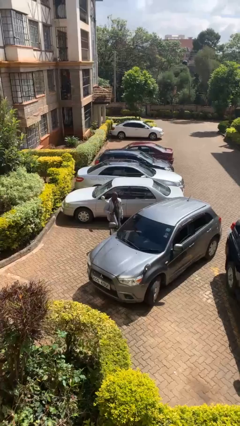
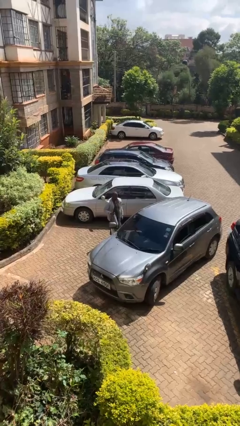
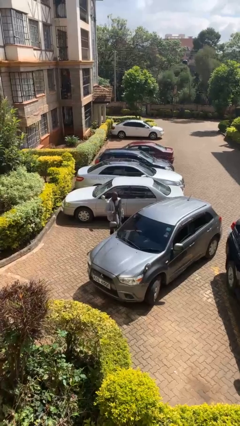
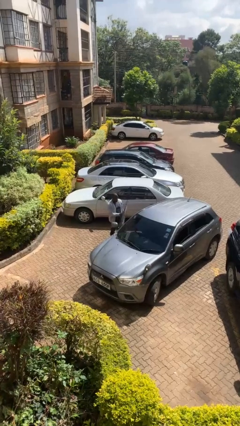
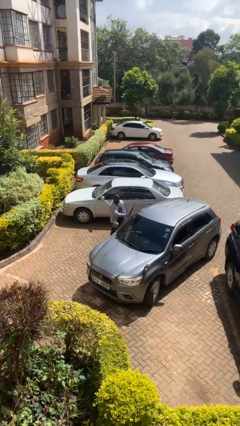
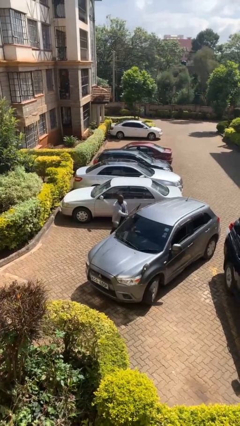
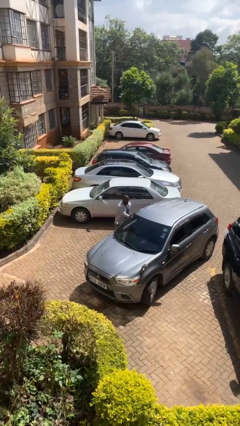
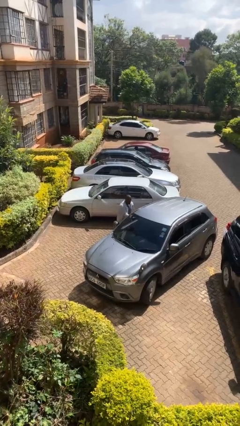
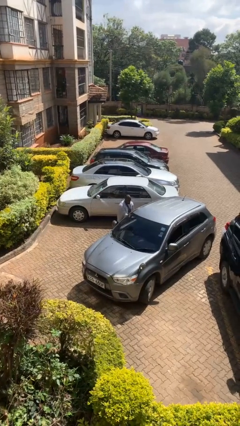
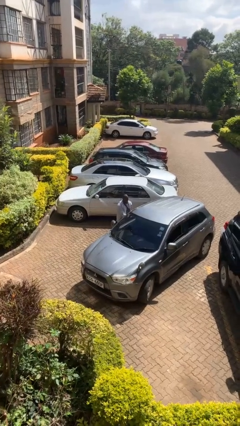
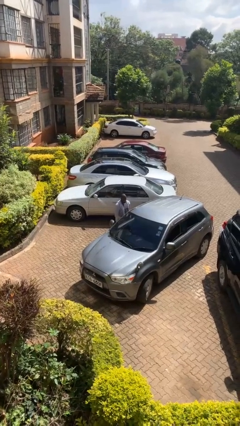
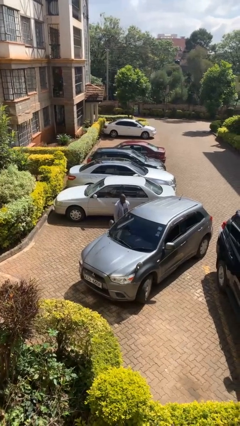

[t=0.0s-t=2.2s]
person closes car door

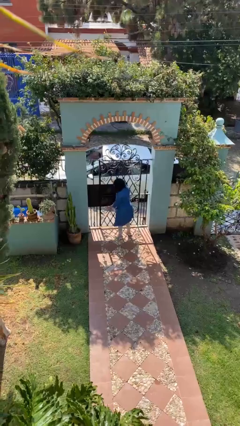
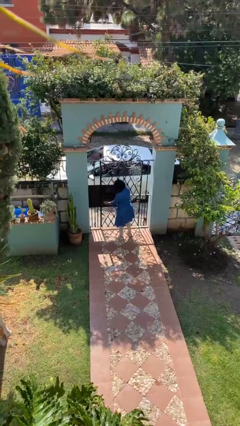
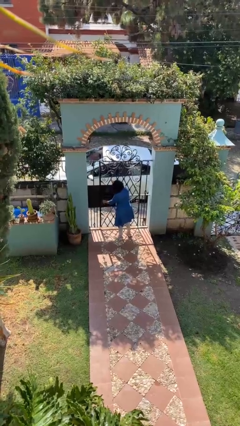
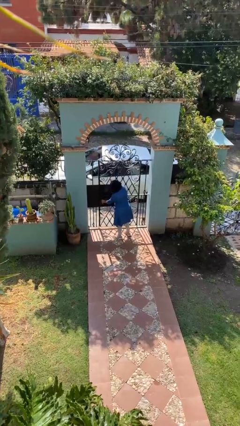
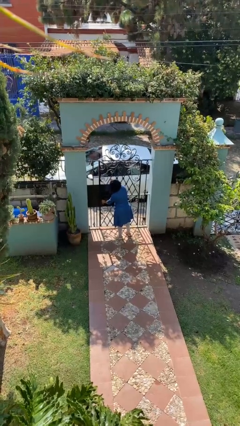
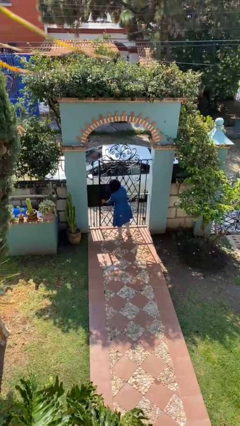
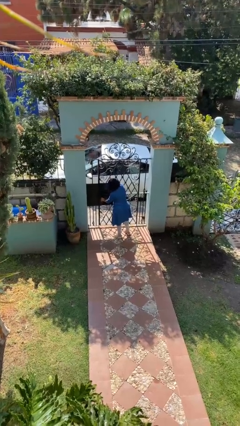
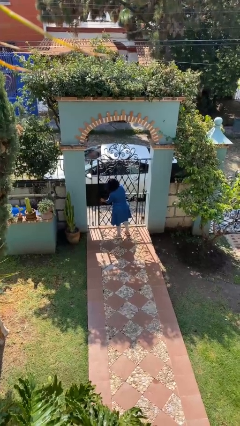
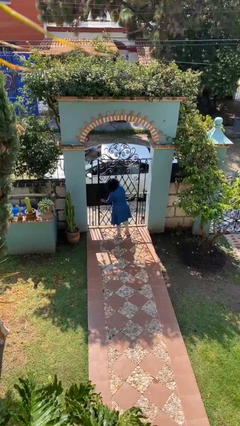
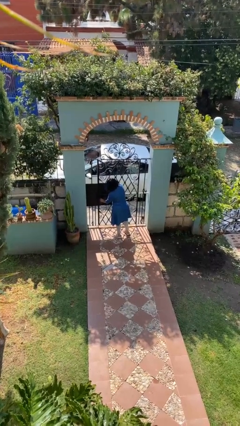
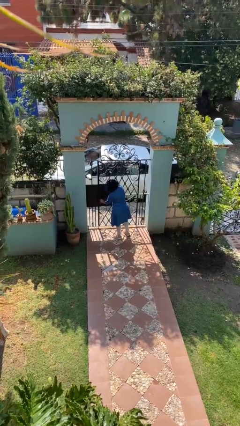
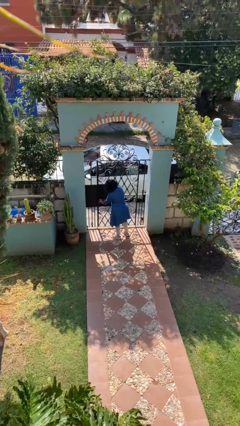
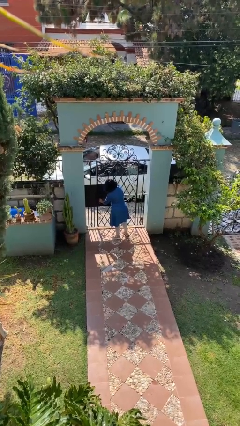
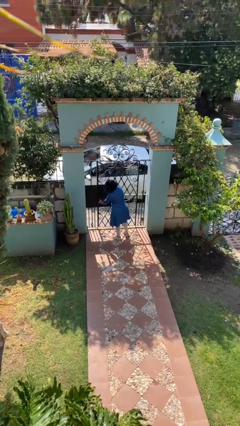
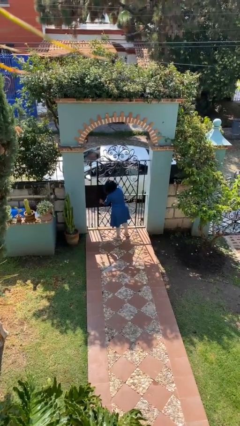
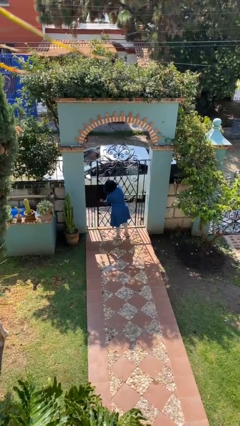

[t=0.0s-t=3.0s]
person locks door with keys

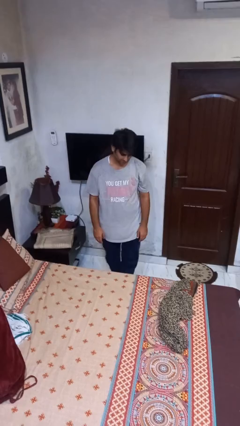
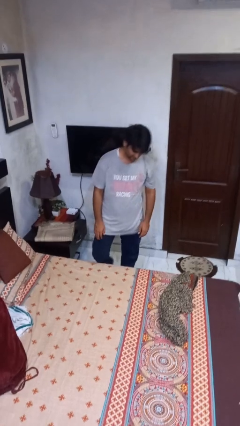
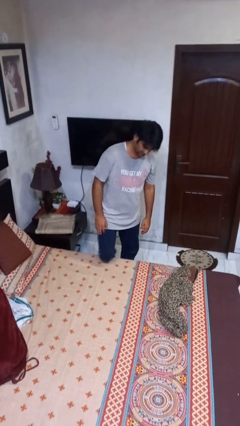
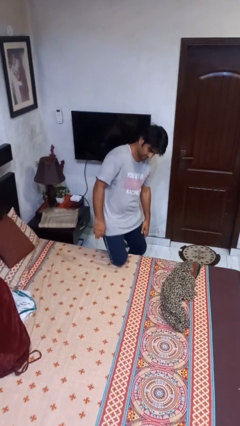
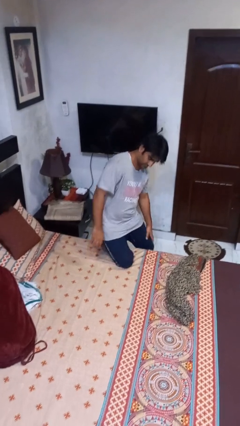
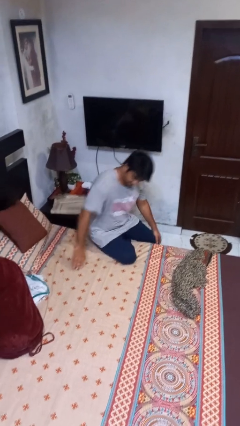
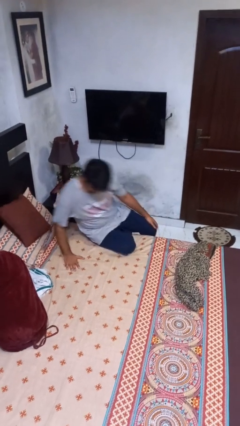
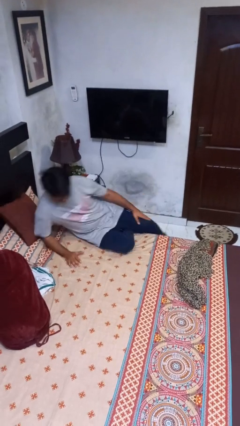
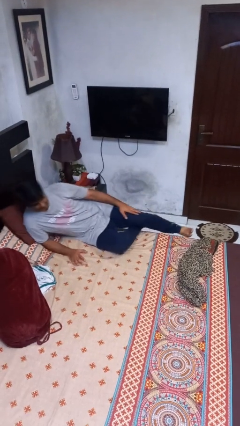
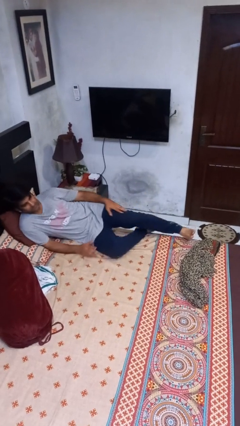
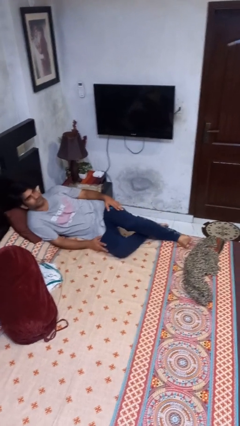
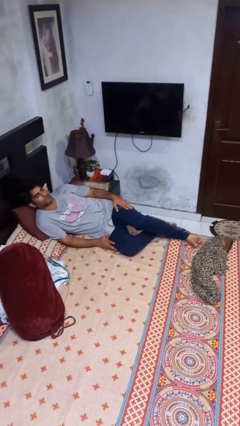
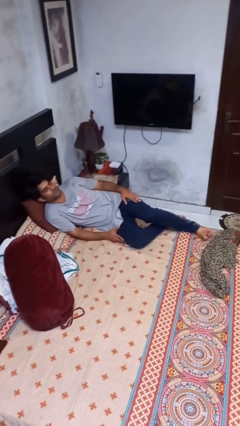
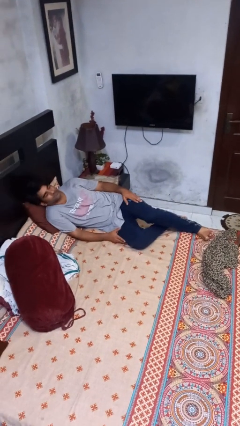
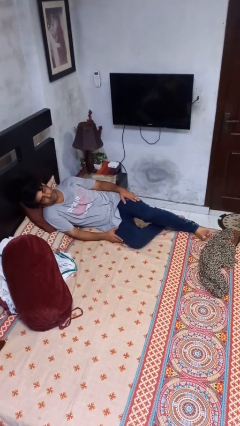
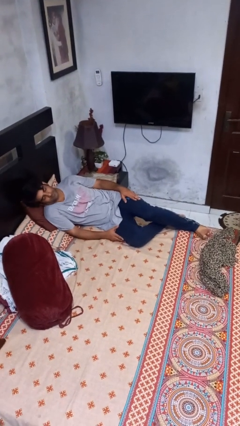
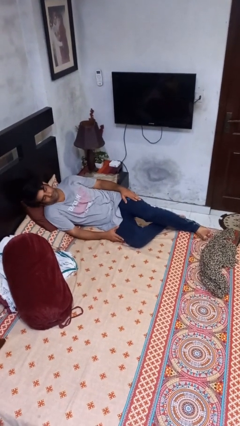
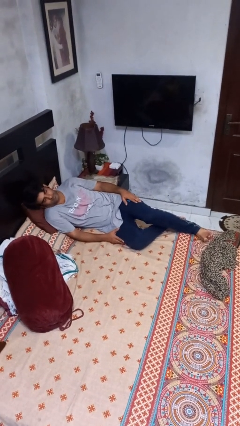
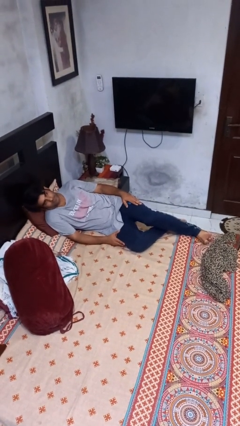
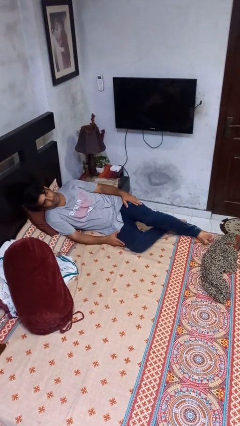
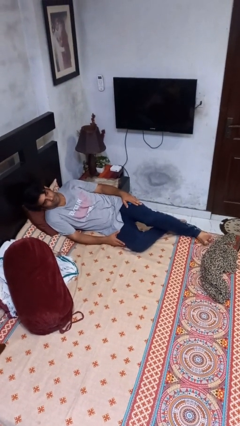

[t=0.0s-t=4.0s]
person lies down on bed

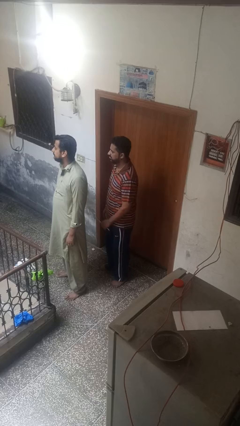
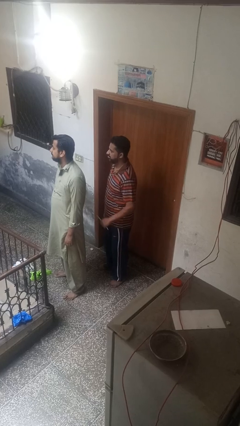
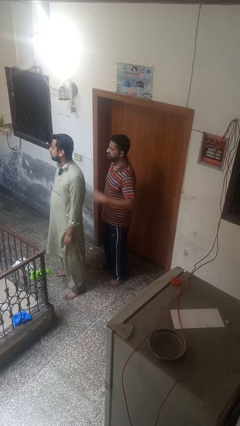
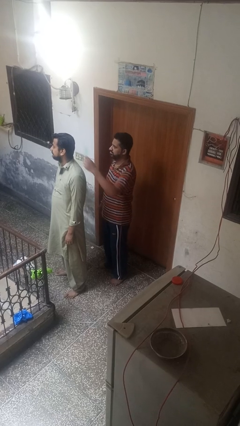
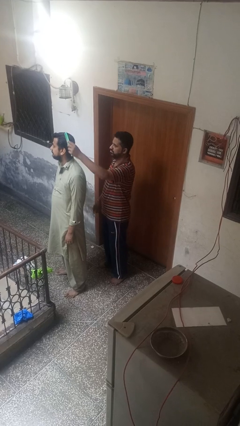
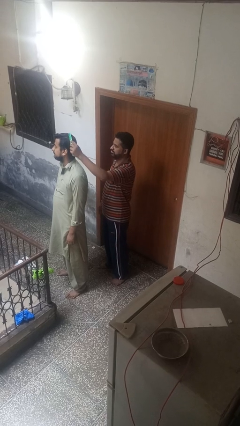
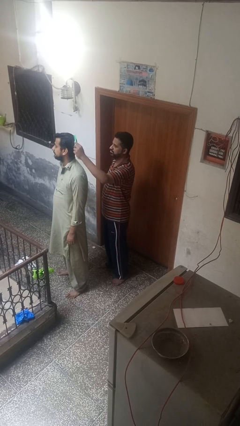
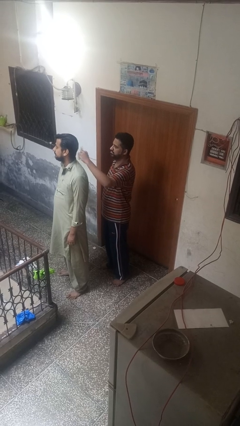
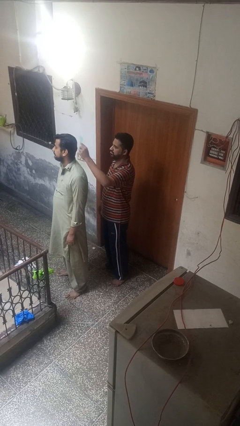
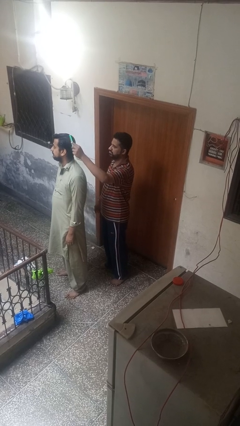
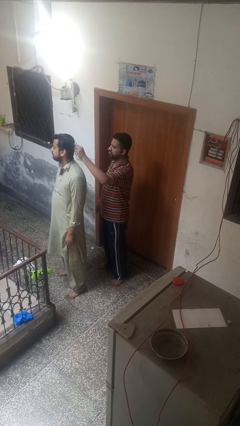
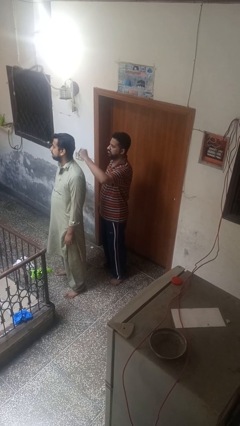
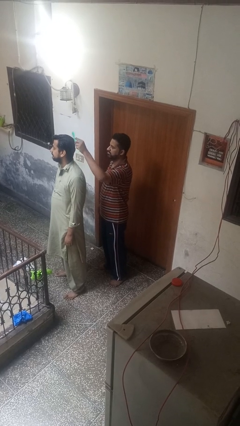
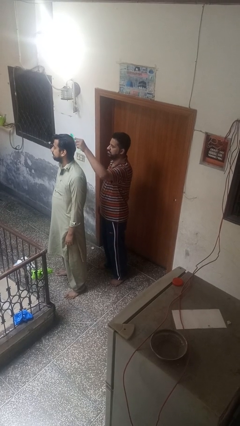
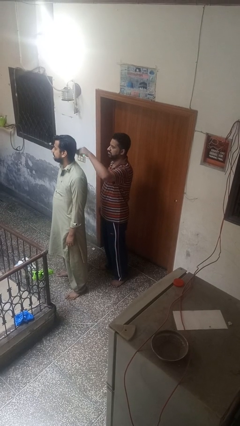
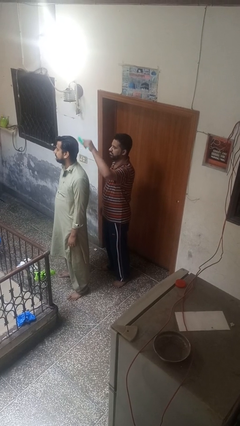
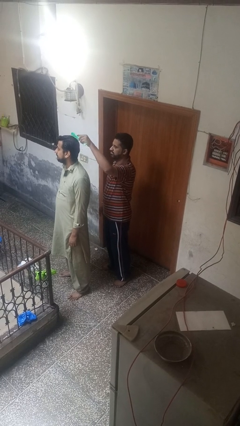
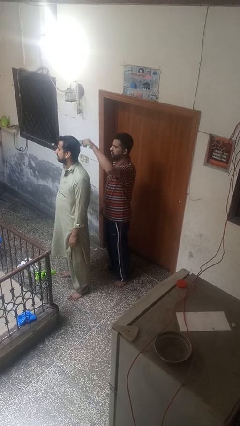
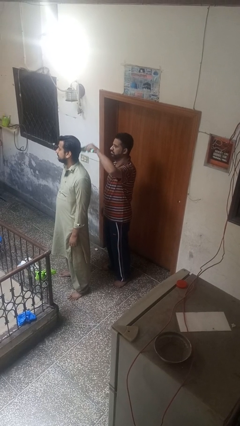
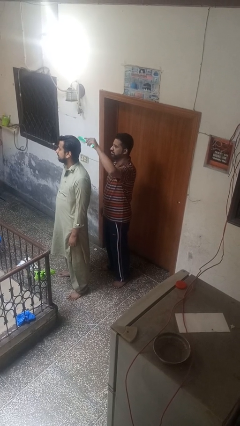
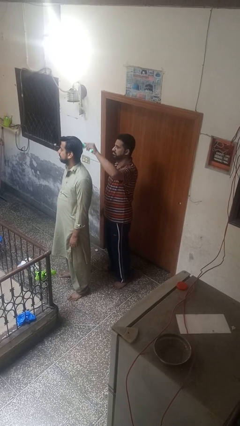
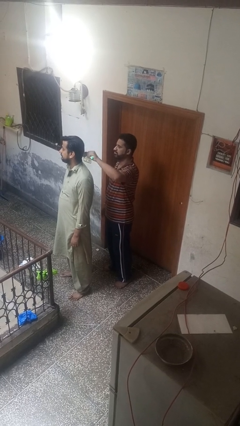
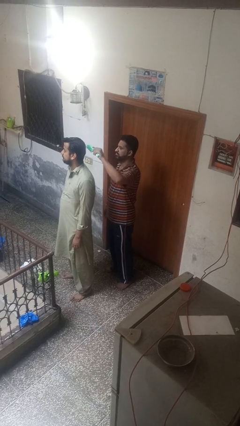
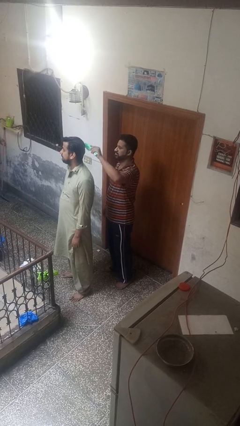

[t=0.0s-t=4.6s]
person brushes hair of person

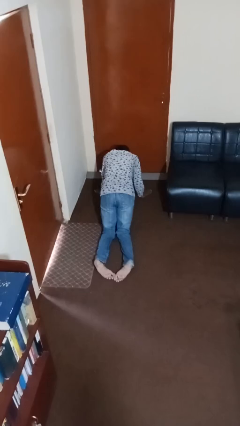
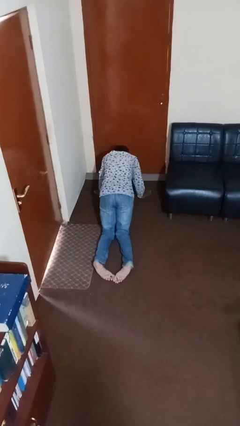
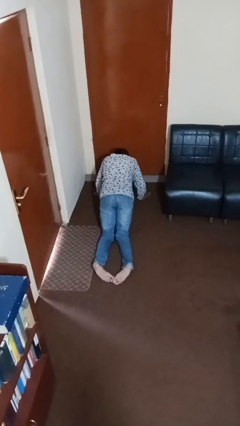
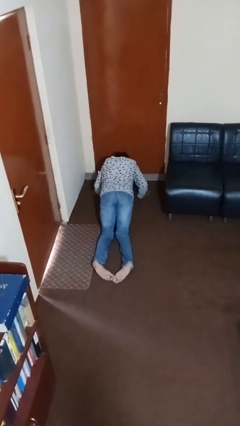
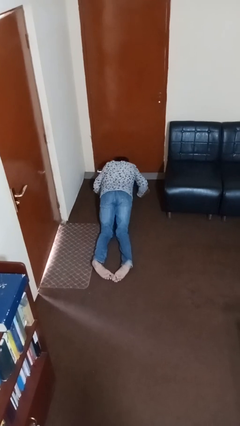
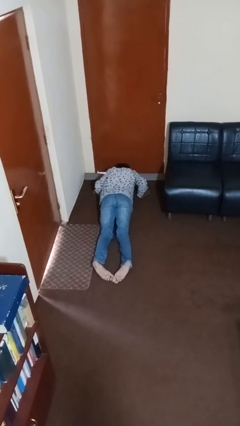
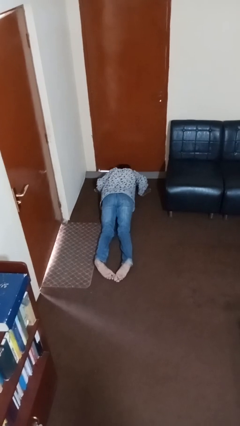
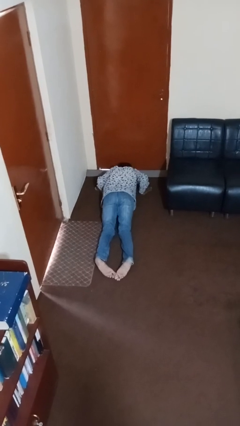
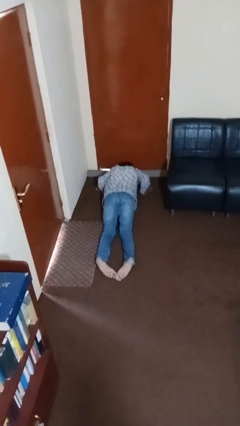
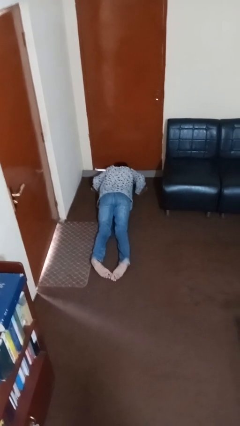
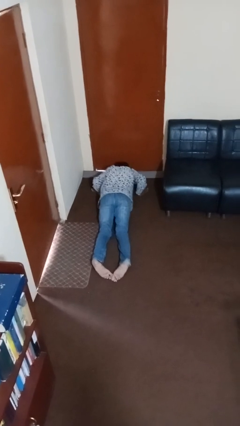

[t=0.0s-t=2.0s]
person exercises with pushup

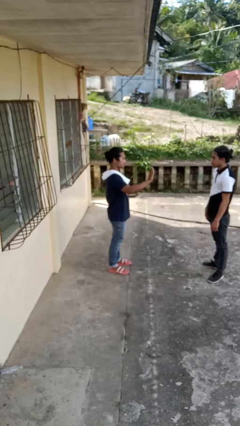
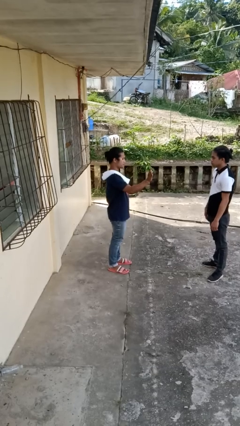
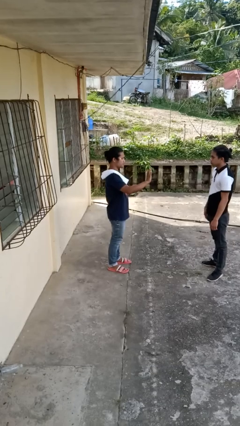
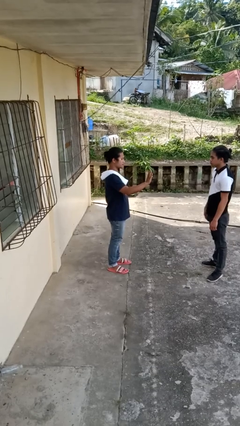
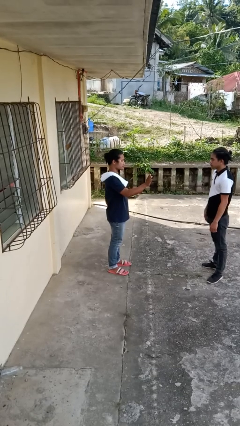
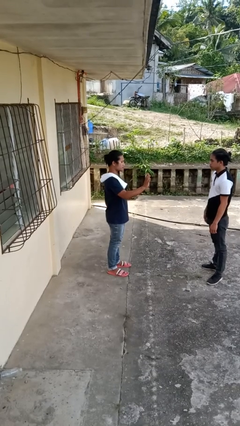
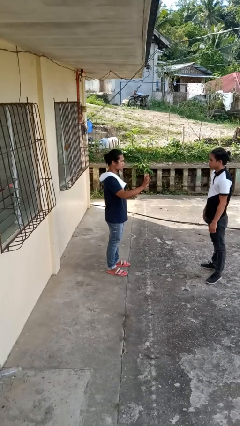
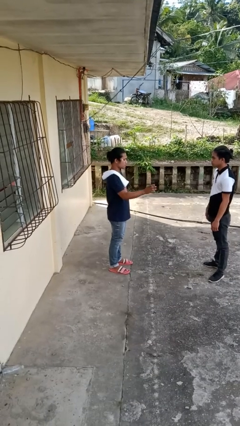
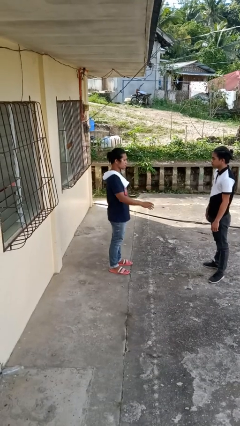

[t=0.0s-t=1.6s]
person waves at person
